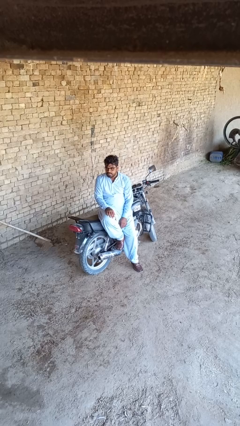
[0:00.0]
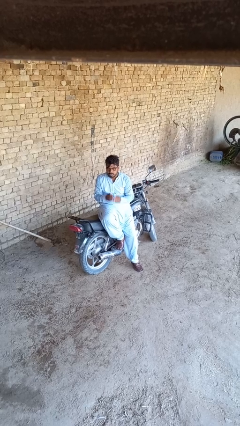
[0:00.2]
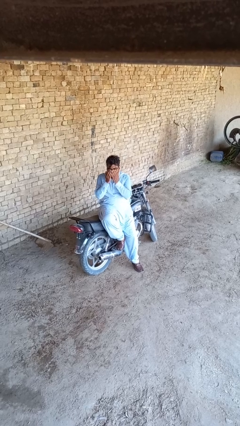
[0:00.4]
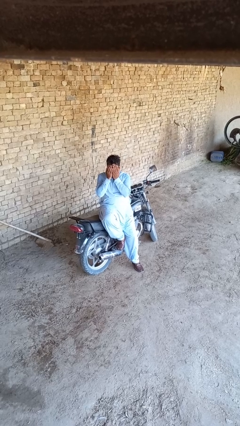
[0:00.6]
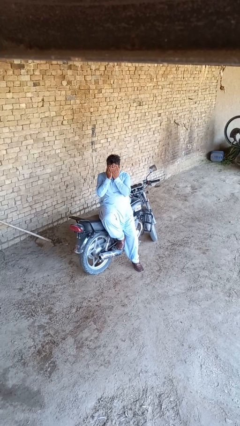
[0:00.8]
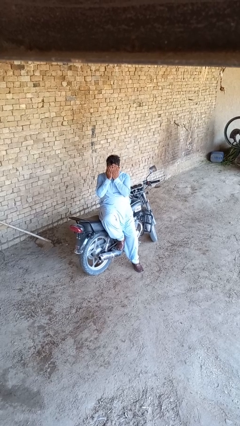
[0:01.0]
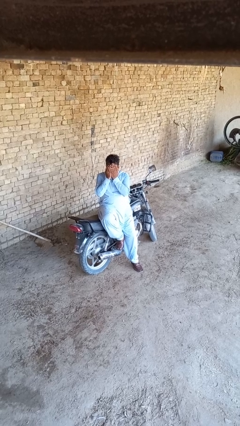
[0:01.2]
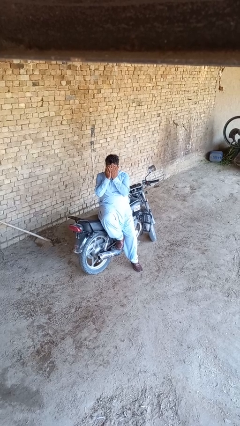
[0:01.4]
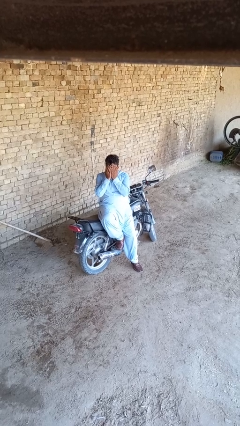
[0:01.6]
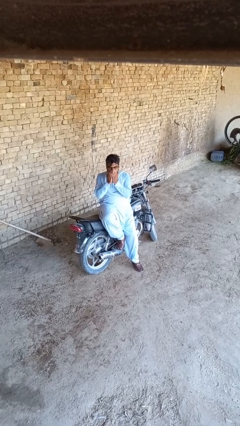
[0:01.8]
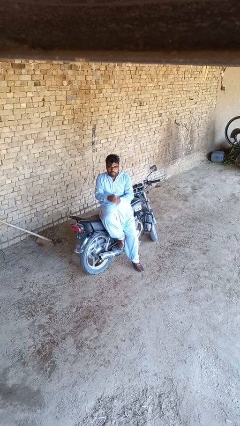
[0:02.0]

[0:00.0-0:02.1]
person covers face with hands

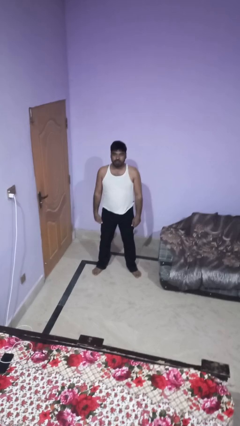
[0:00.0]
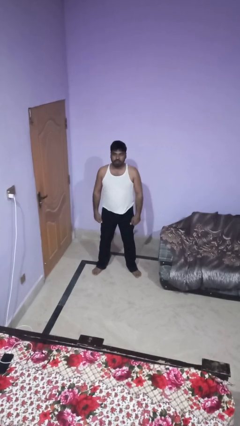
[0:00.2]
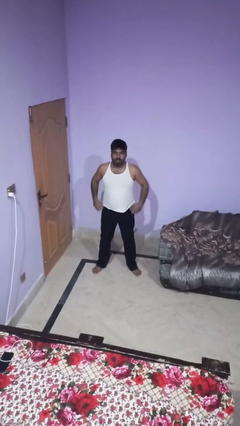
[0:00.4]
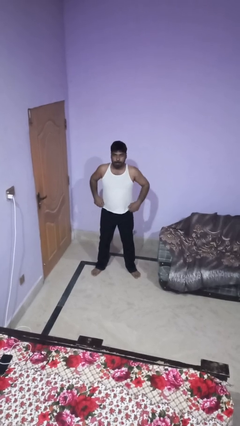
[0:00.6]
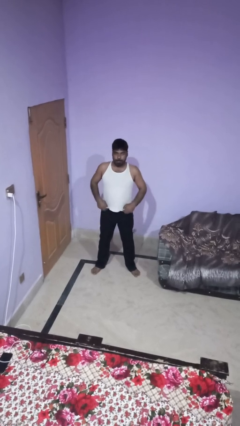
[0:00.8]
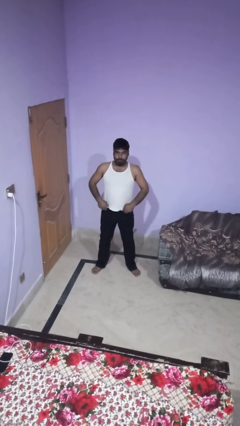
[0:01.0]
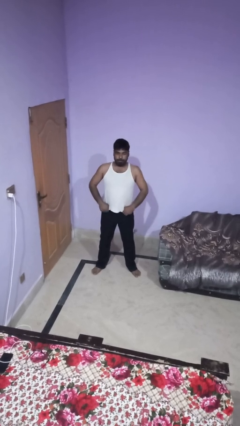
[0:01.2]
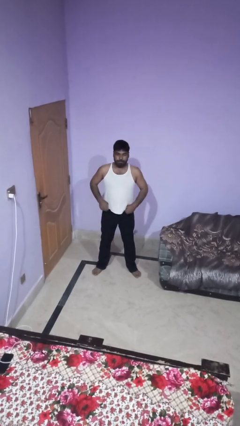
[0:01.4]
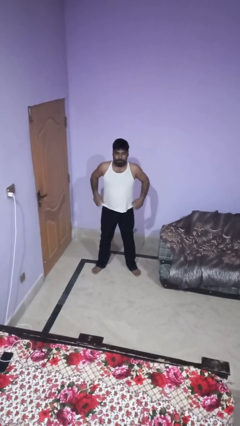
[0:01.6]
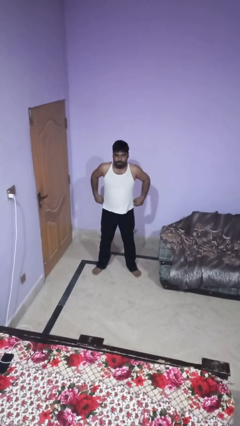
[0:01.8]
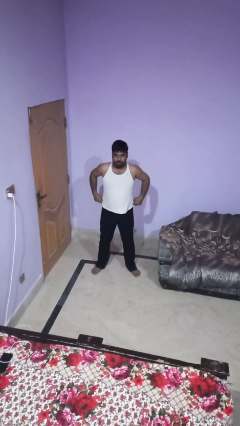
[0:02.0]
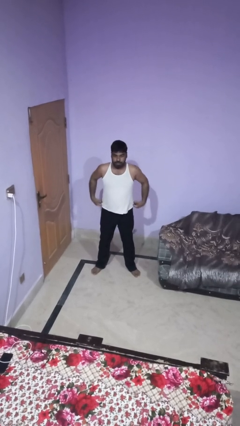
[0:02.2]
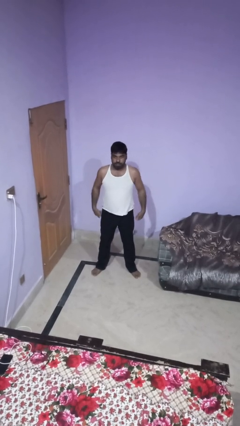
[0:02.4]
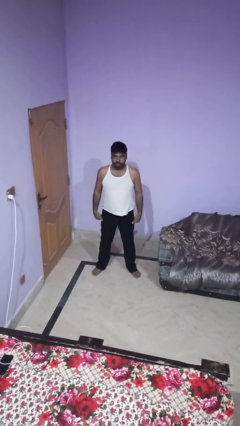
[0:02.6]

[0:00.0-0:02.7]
person hikes up pants

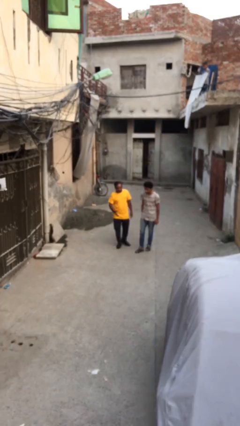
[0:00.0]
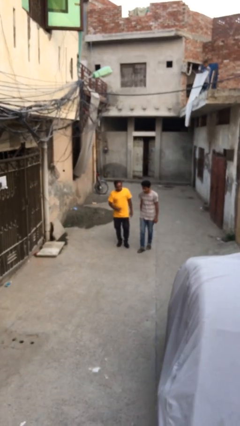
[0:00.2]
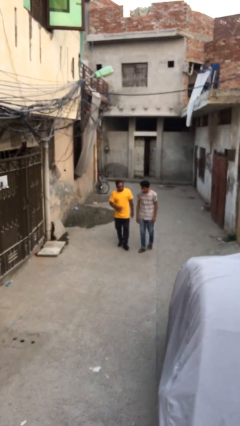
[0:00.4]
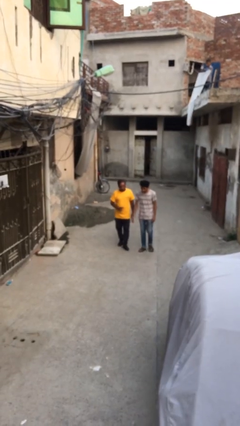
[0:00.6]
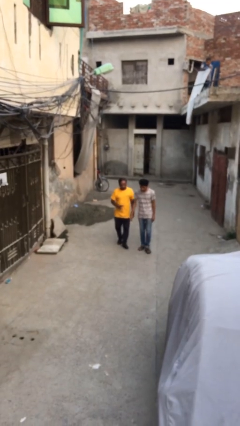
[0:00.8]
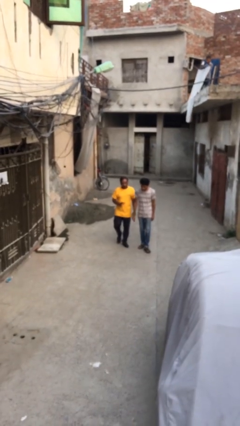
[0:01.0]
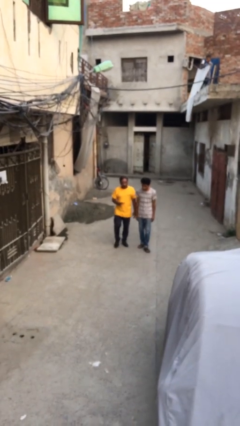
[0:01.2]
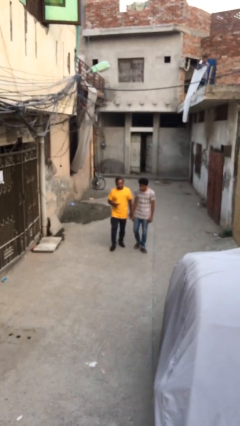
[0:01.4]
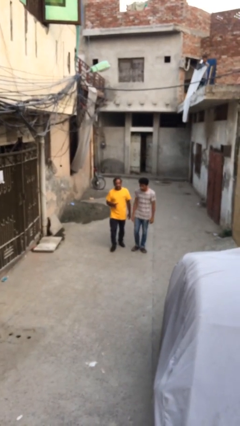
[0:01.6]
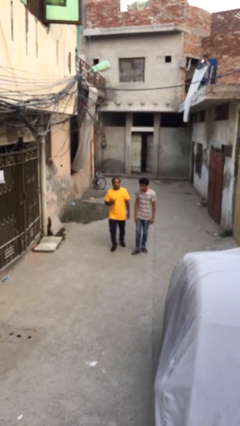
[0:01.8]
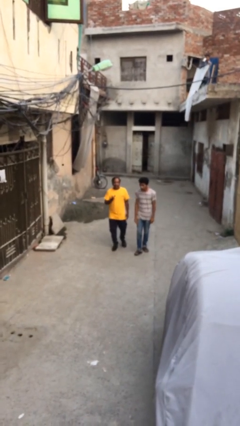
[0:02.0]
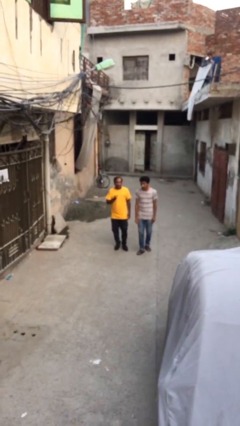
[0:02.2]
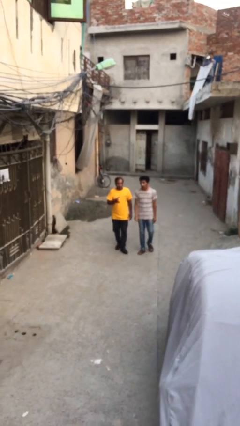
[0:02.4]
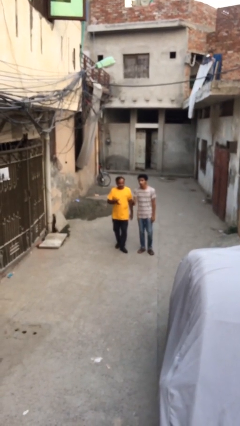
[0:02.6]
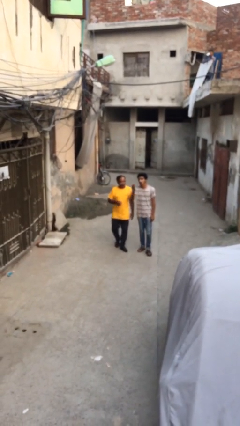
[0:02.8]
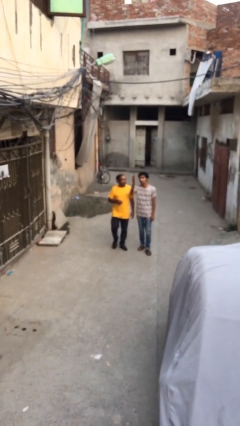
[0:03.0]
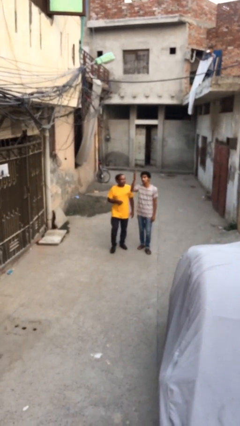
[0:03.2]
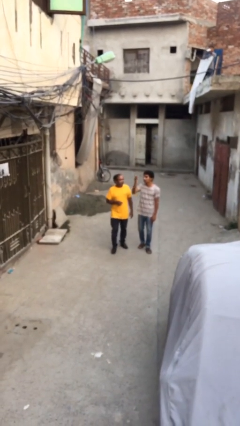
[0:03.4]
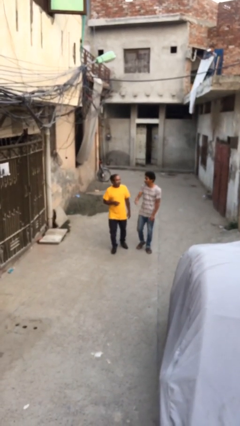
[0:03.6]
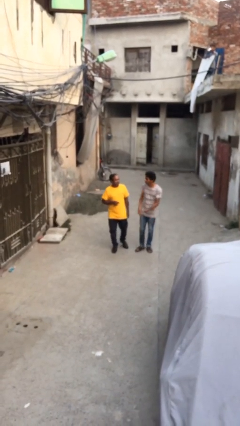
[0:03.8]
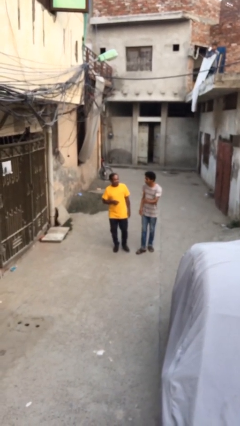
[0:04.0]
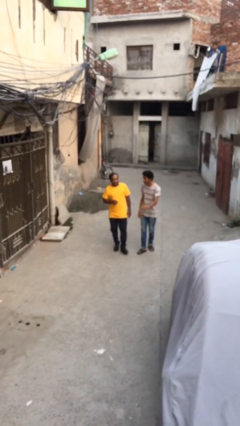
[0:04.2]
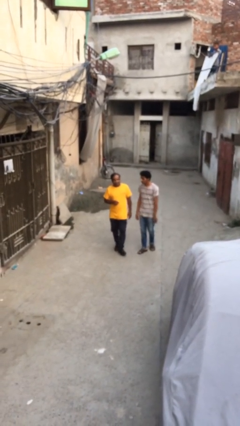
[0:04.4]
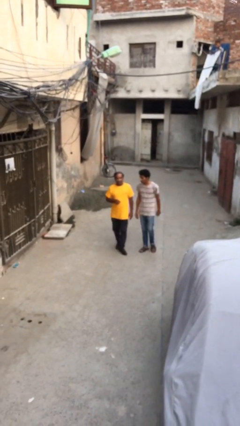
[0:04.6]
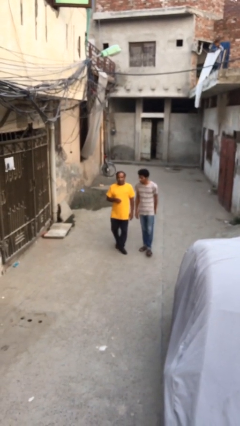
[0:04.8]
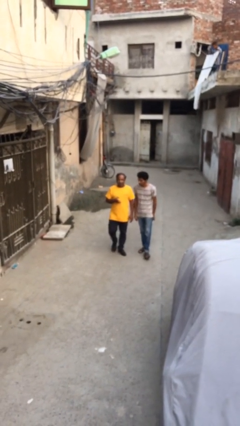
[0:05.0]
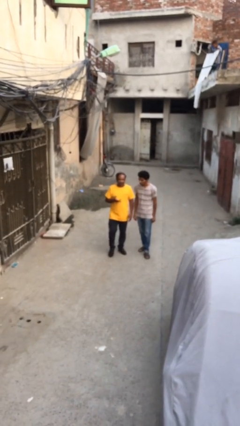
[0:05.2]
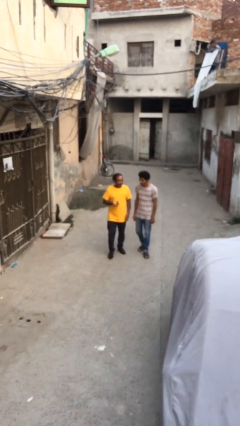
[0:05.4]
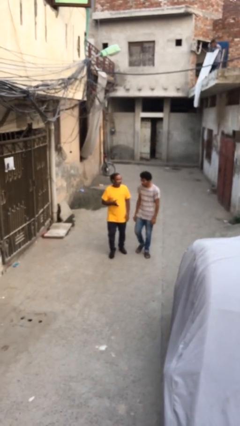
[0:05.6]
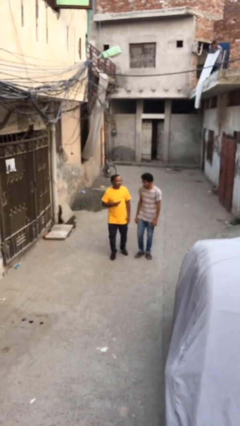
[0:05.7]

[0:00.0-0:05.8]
person talks to person

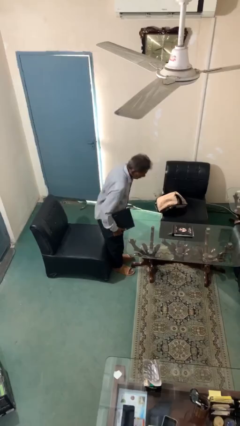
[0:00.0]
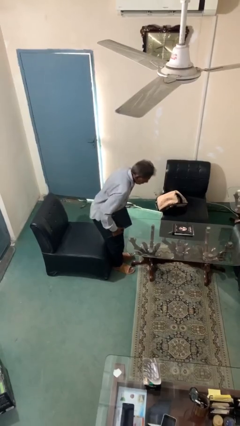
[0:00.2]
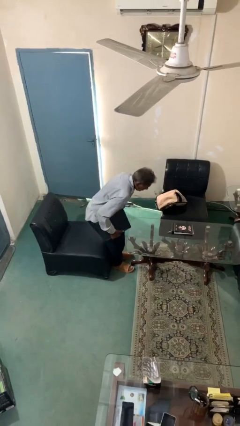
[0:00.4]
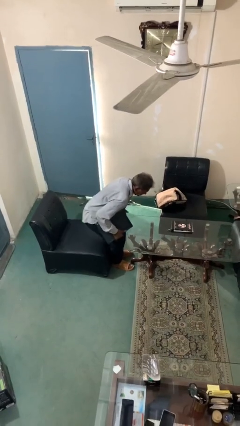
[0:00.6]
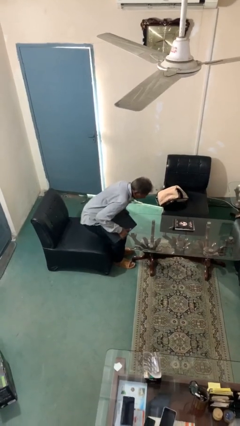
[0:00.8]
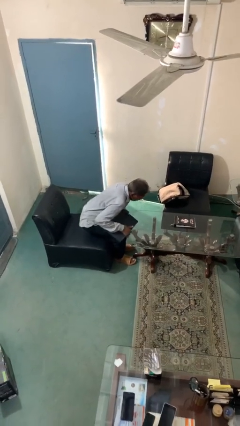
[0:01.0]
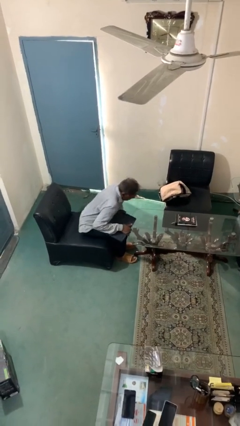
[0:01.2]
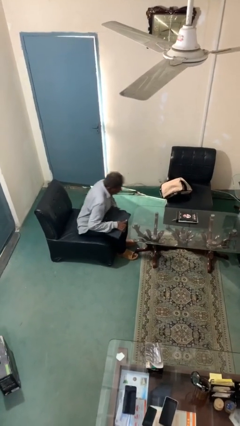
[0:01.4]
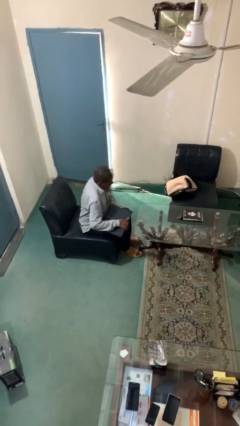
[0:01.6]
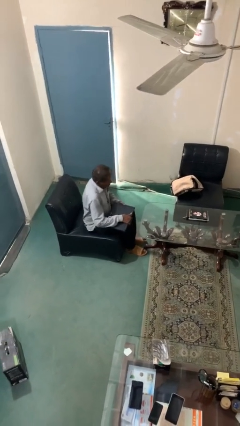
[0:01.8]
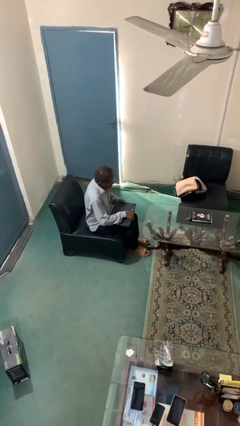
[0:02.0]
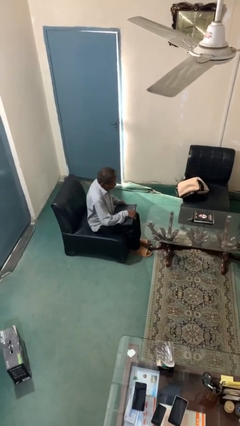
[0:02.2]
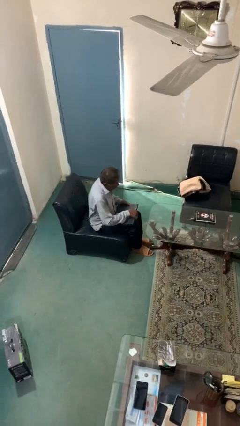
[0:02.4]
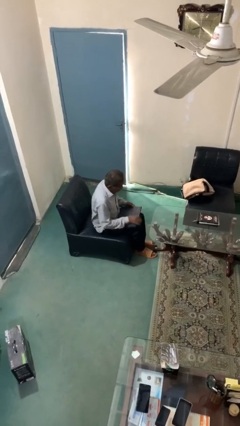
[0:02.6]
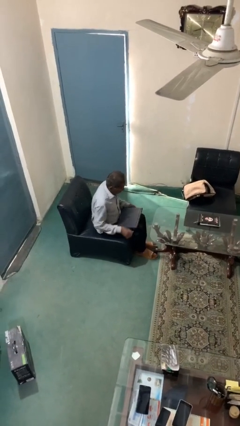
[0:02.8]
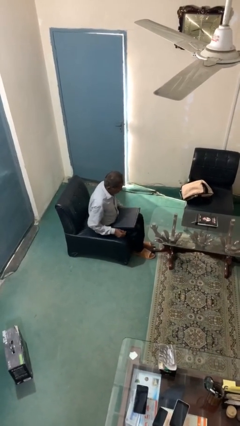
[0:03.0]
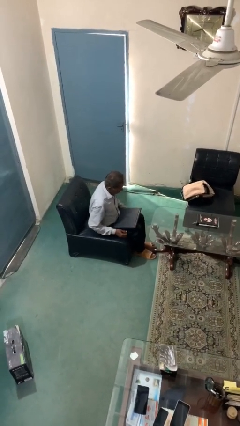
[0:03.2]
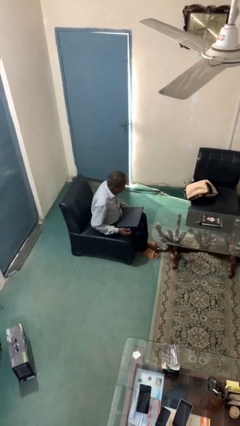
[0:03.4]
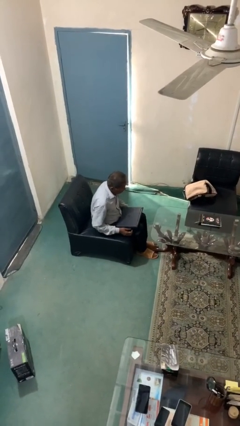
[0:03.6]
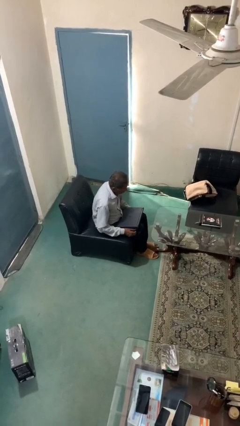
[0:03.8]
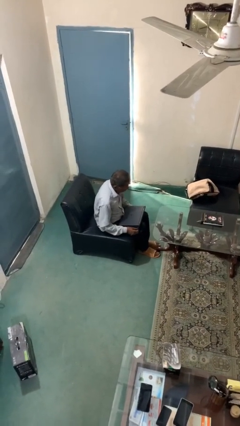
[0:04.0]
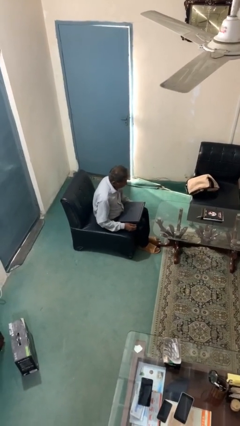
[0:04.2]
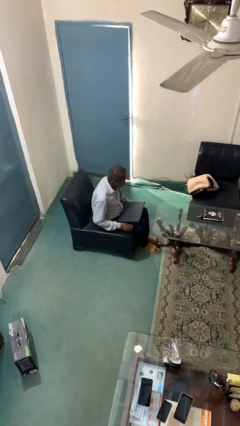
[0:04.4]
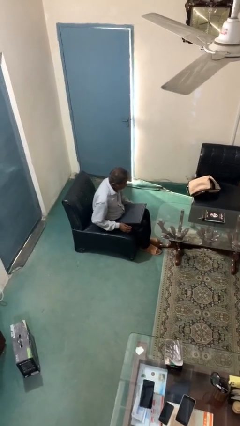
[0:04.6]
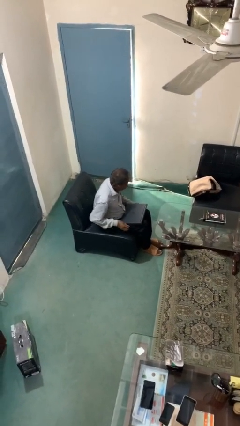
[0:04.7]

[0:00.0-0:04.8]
person sits down

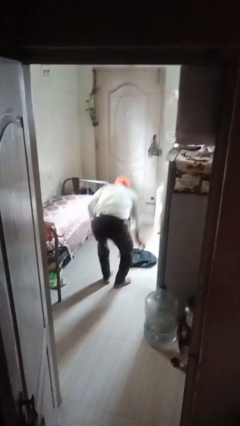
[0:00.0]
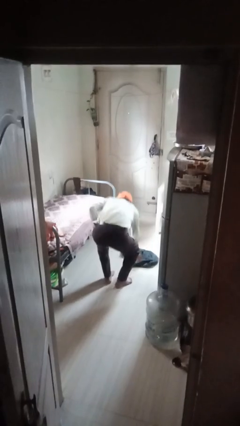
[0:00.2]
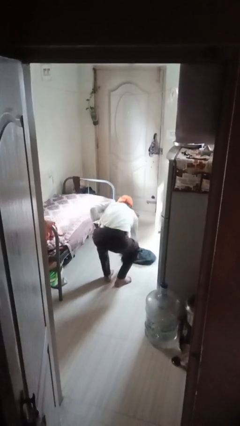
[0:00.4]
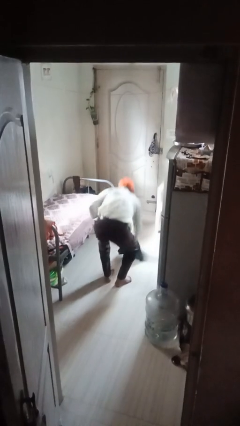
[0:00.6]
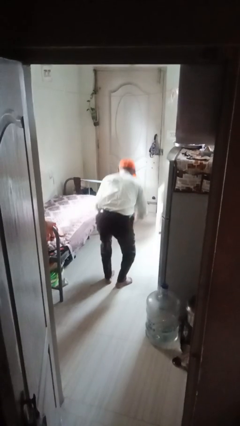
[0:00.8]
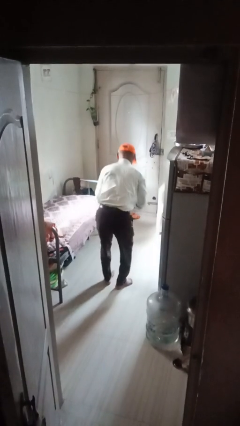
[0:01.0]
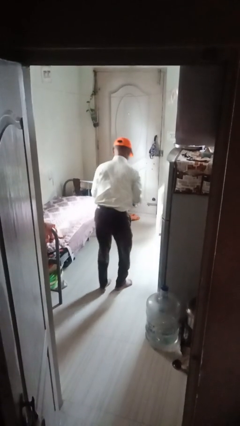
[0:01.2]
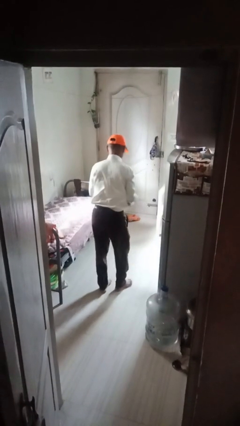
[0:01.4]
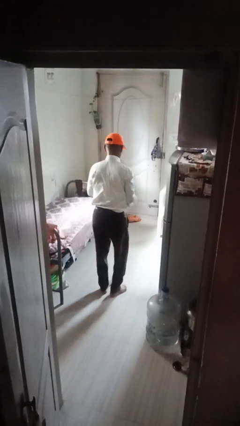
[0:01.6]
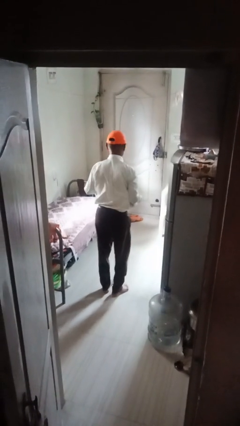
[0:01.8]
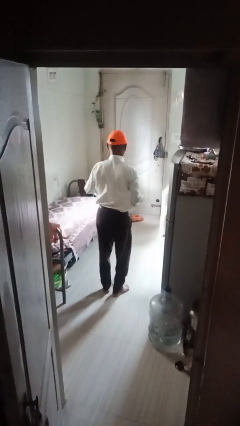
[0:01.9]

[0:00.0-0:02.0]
person picks up object from floor

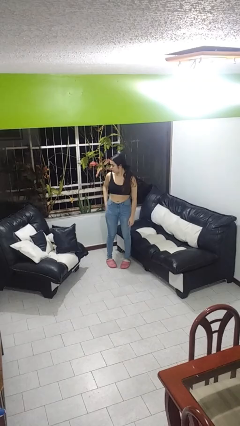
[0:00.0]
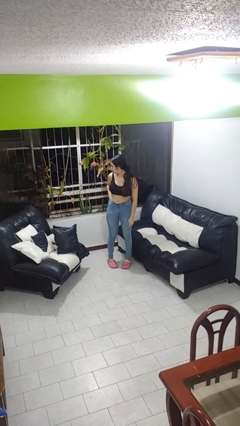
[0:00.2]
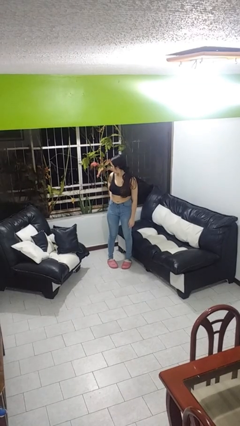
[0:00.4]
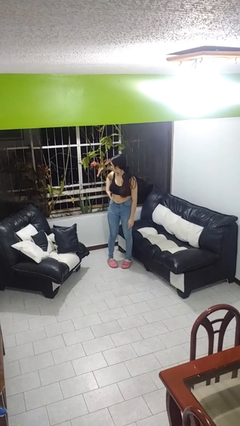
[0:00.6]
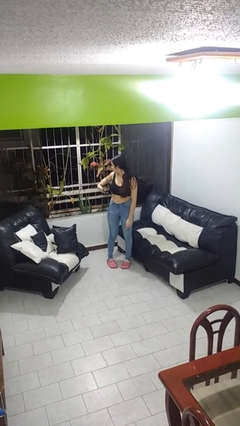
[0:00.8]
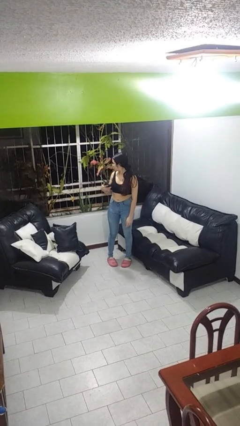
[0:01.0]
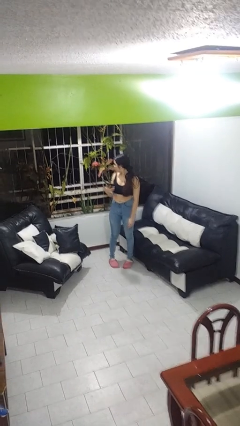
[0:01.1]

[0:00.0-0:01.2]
person takes phone from pocket
